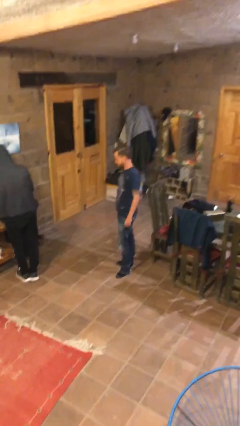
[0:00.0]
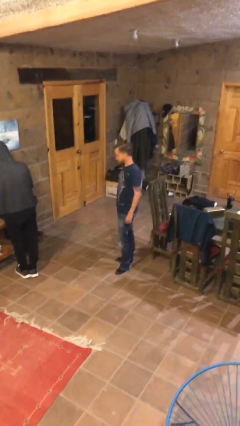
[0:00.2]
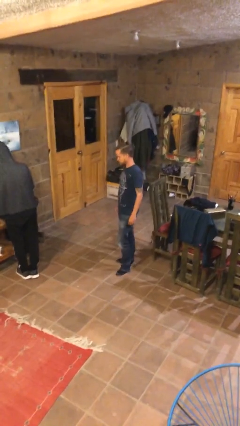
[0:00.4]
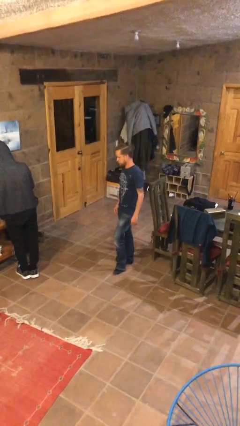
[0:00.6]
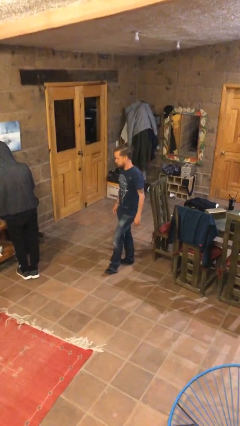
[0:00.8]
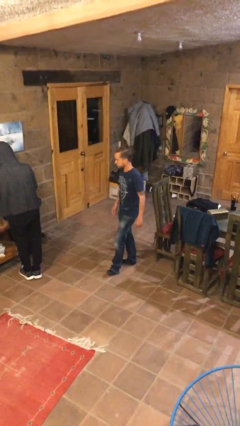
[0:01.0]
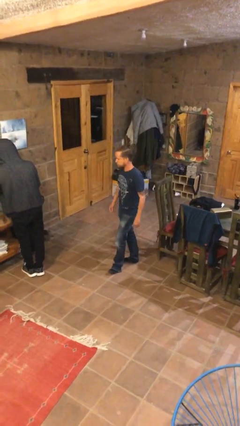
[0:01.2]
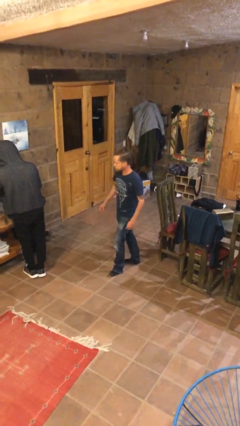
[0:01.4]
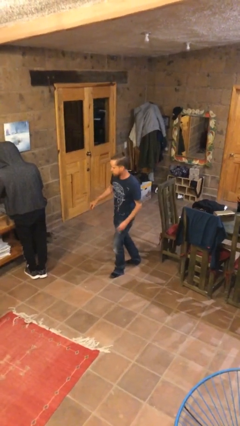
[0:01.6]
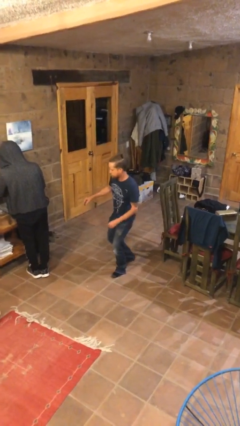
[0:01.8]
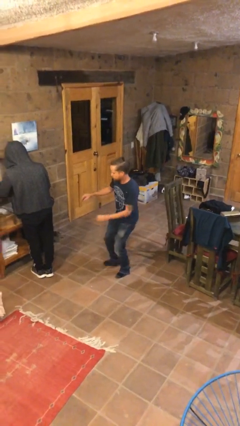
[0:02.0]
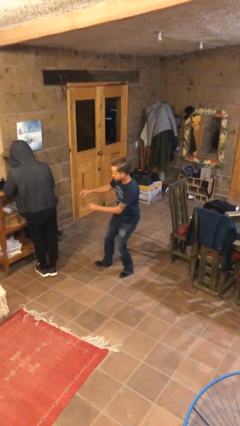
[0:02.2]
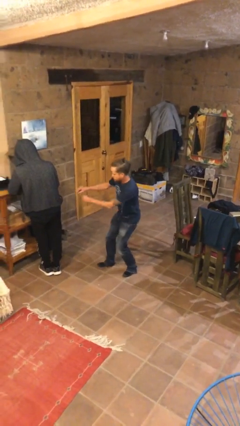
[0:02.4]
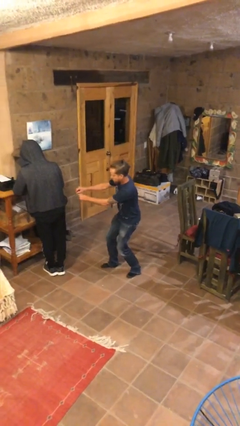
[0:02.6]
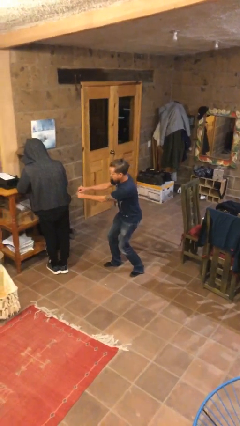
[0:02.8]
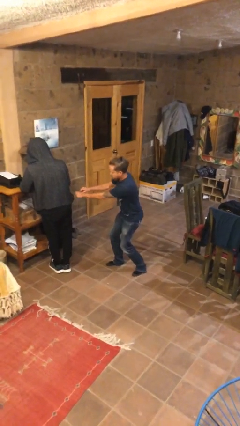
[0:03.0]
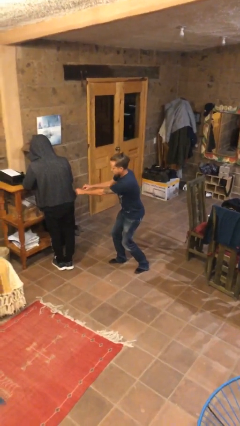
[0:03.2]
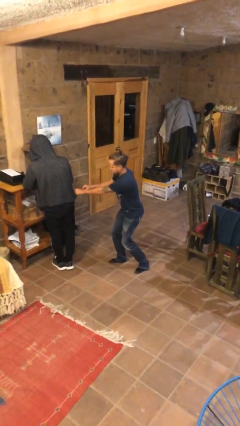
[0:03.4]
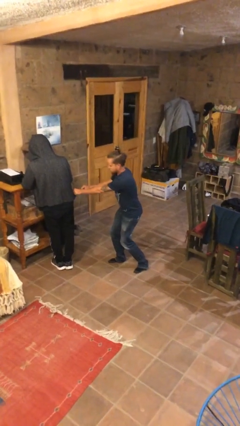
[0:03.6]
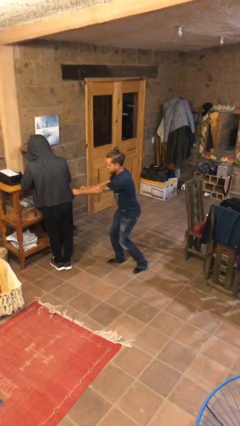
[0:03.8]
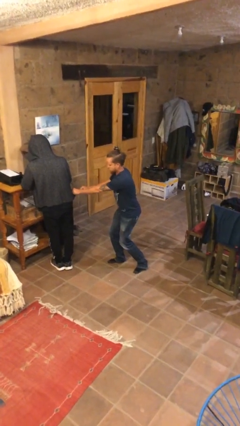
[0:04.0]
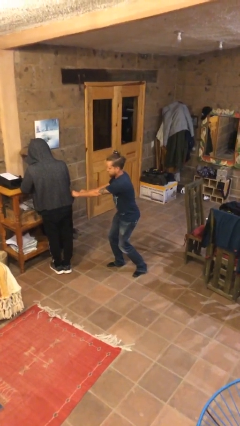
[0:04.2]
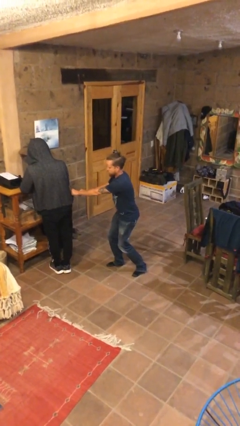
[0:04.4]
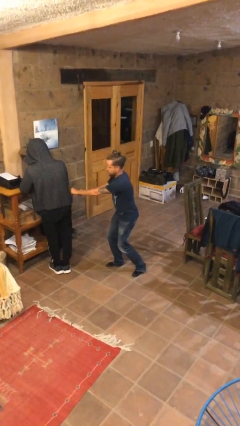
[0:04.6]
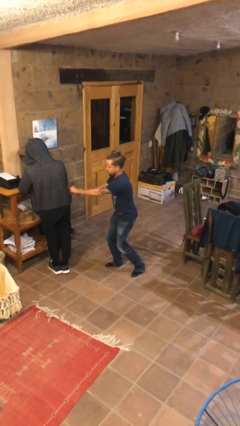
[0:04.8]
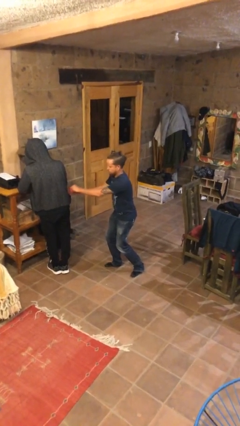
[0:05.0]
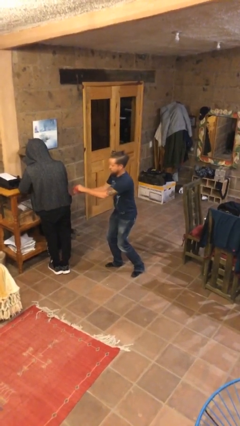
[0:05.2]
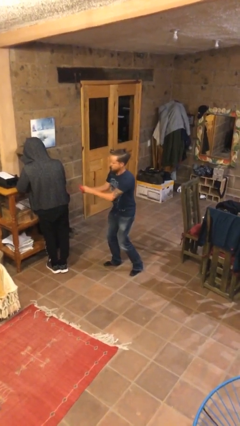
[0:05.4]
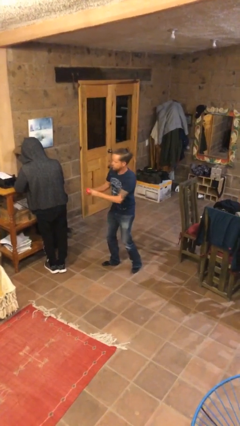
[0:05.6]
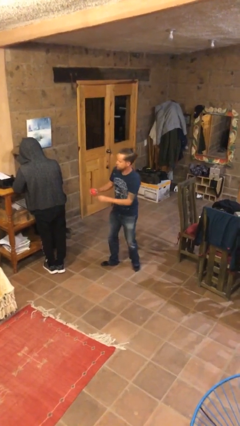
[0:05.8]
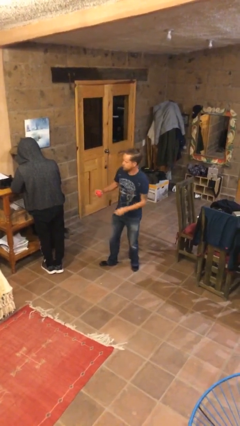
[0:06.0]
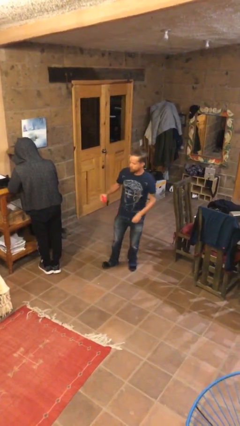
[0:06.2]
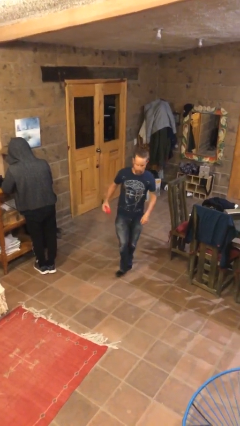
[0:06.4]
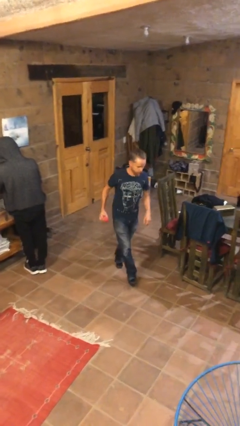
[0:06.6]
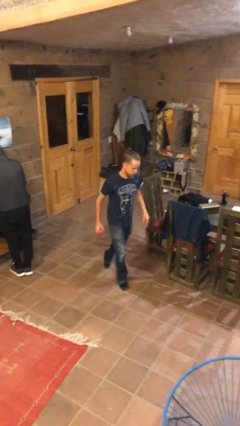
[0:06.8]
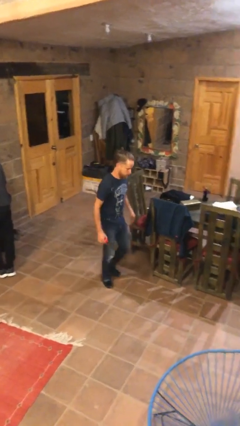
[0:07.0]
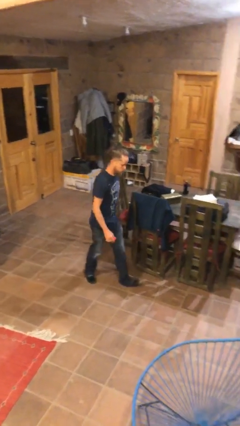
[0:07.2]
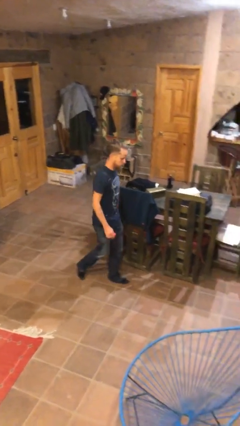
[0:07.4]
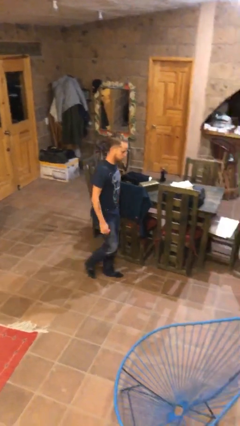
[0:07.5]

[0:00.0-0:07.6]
person steals object from person

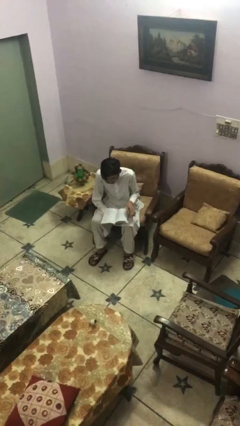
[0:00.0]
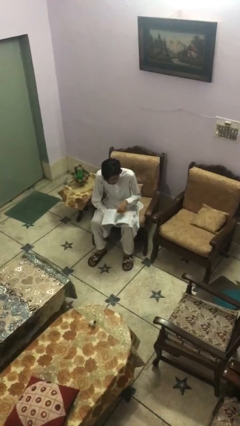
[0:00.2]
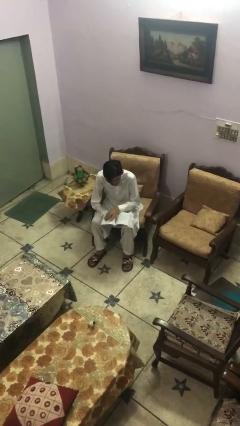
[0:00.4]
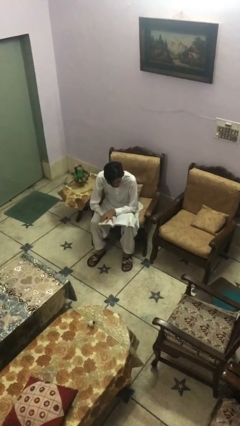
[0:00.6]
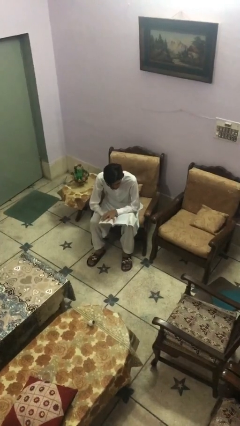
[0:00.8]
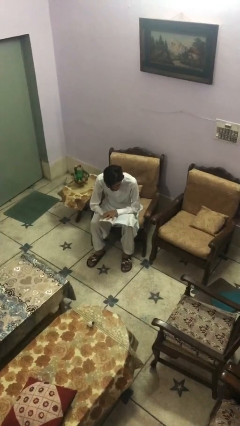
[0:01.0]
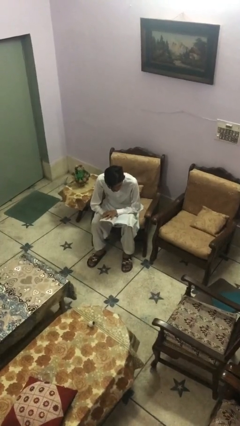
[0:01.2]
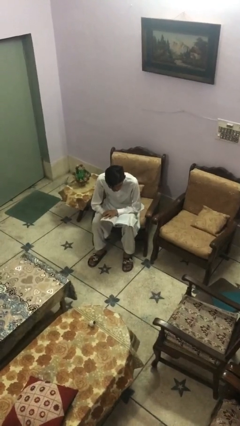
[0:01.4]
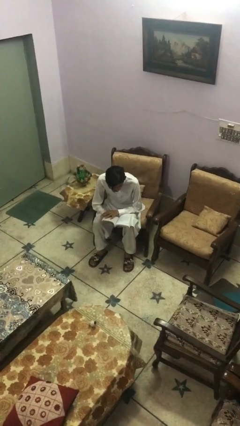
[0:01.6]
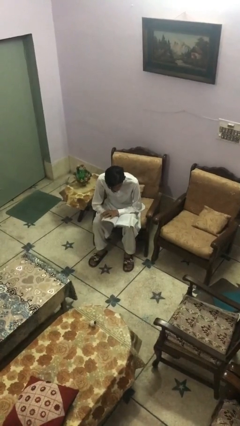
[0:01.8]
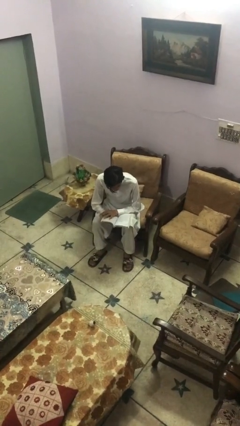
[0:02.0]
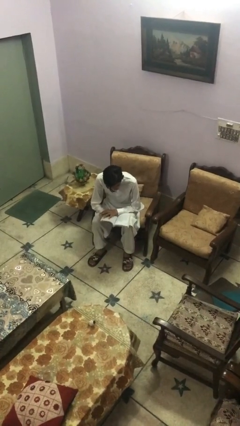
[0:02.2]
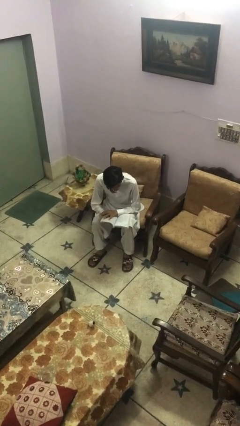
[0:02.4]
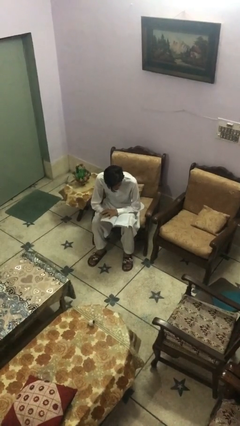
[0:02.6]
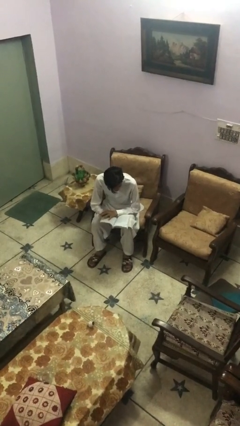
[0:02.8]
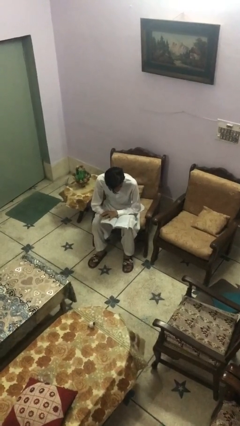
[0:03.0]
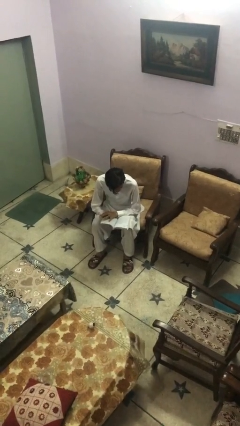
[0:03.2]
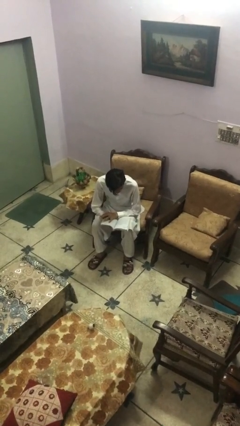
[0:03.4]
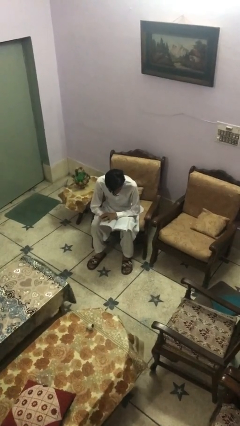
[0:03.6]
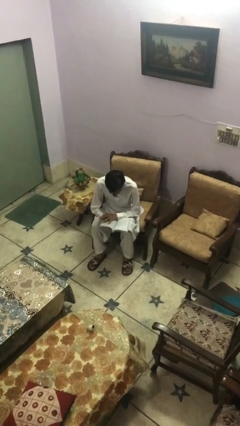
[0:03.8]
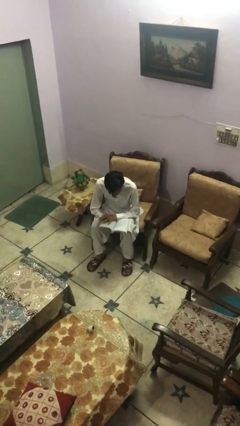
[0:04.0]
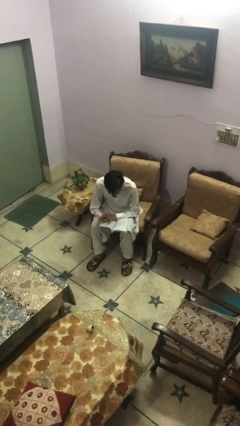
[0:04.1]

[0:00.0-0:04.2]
person reads document

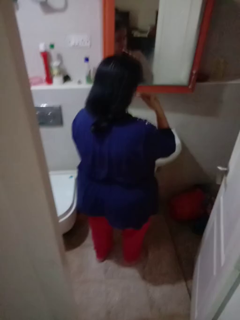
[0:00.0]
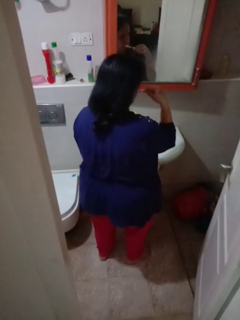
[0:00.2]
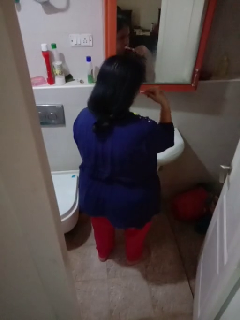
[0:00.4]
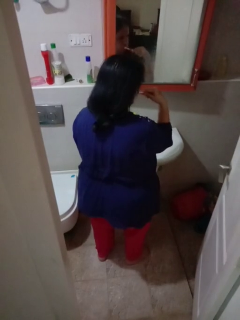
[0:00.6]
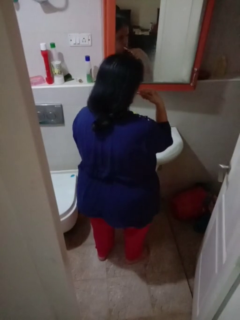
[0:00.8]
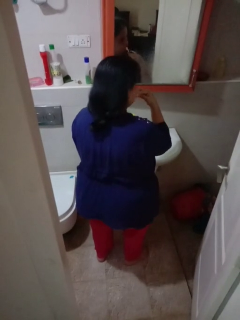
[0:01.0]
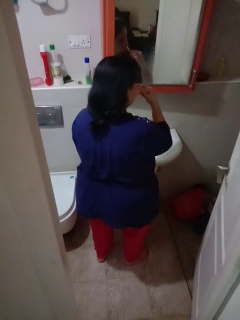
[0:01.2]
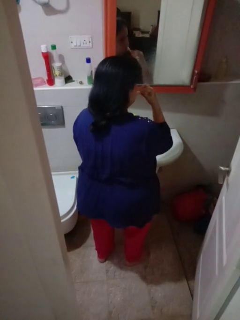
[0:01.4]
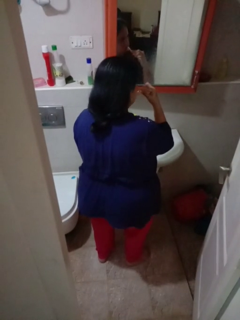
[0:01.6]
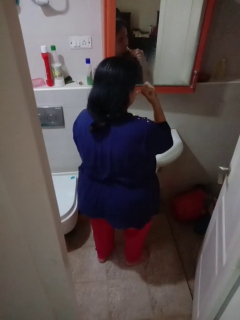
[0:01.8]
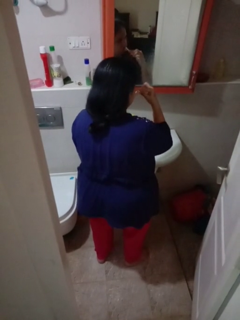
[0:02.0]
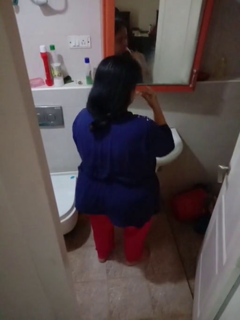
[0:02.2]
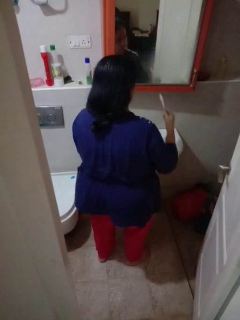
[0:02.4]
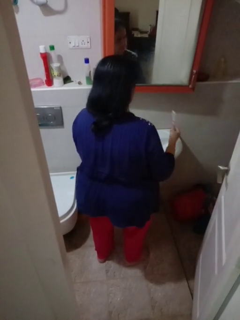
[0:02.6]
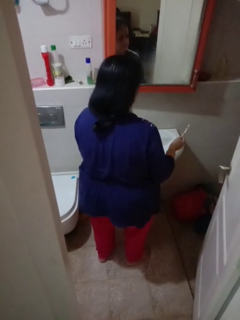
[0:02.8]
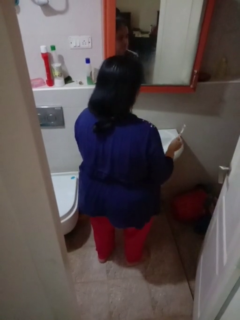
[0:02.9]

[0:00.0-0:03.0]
person brushes teeth

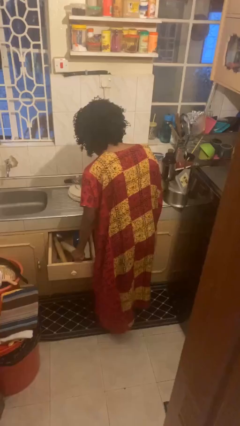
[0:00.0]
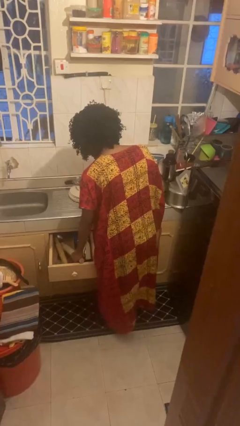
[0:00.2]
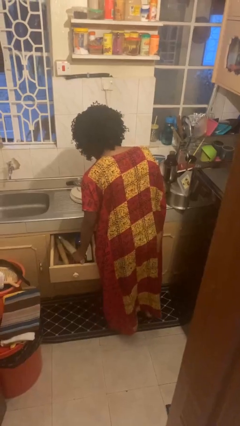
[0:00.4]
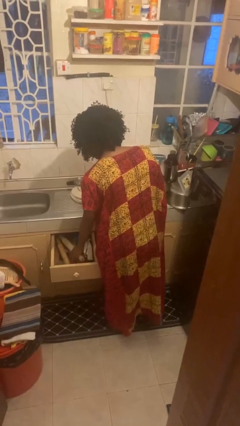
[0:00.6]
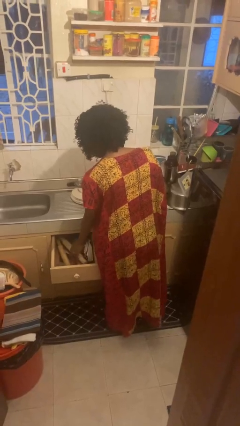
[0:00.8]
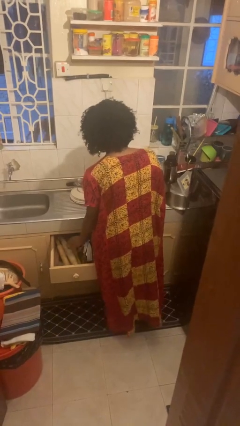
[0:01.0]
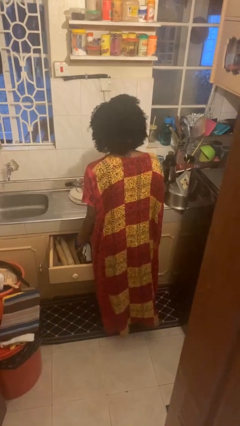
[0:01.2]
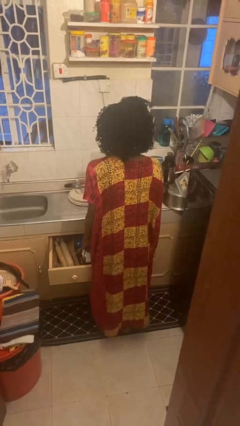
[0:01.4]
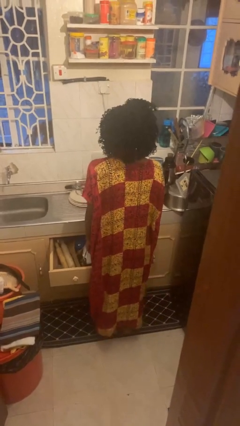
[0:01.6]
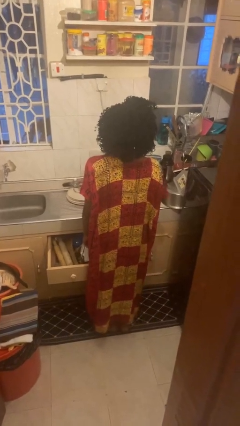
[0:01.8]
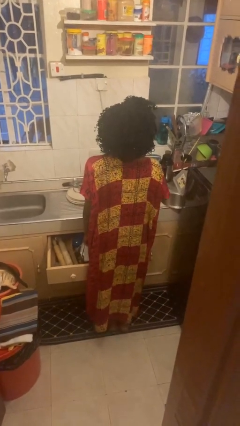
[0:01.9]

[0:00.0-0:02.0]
person puts object into kitchen drawer

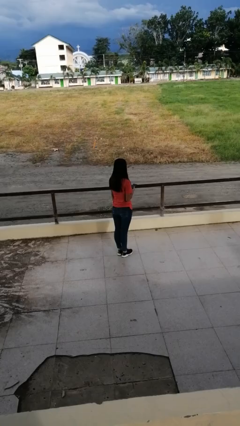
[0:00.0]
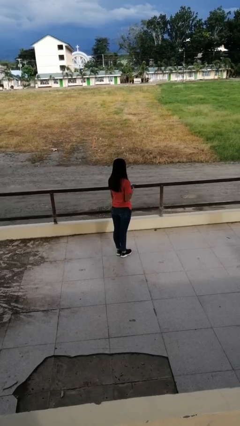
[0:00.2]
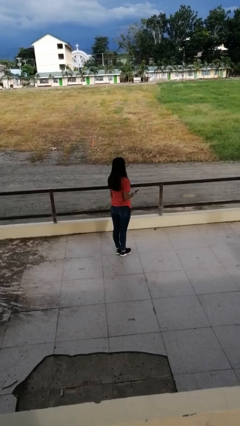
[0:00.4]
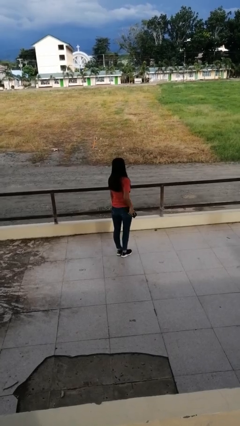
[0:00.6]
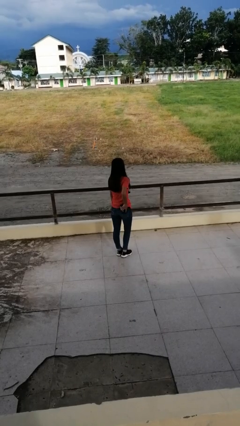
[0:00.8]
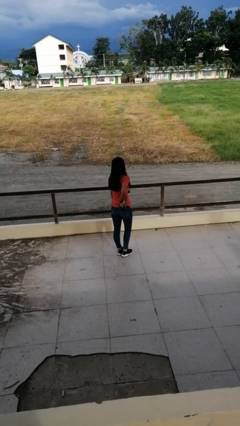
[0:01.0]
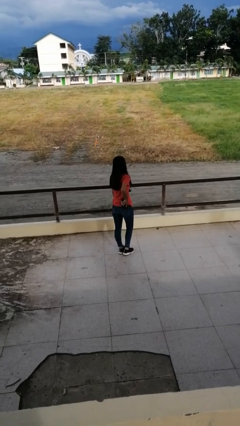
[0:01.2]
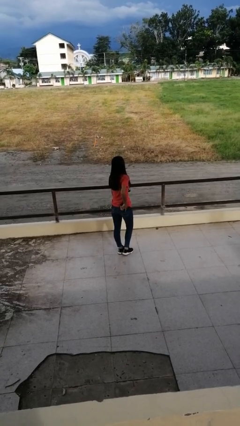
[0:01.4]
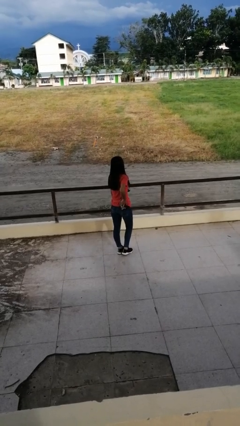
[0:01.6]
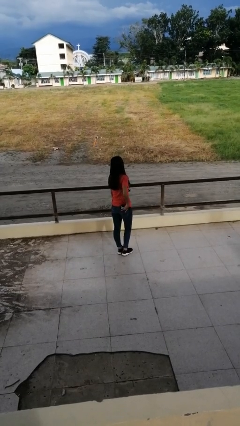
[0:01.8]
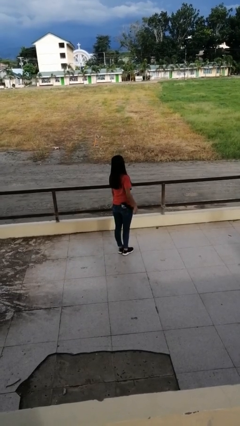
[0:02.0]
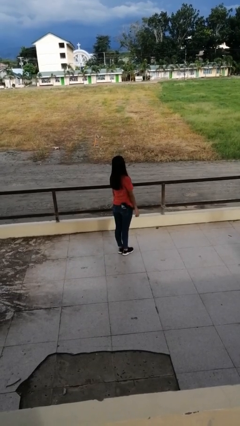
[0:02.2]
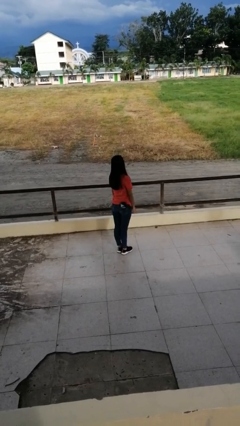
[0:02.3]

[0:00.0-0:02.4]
person puts phone into pocket
